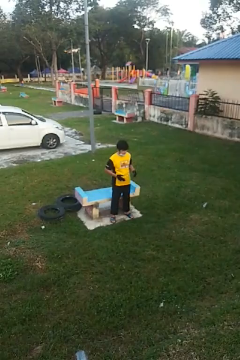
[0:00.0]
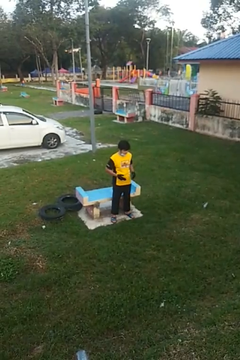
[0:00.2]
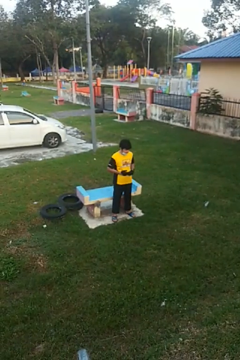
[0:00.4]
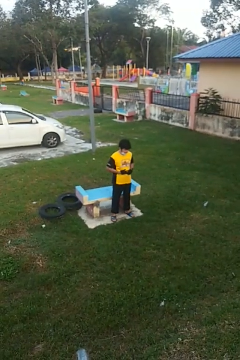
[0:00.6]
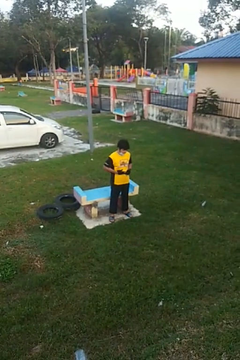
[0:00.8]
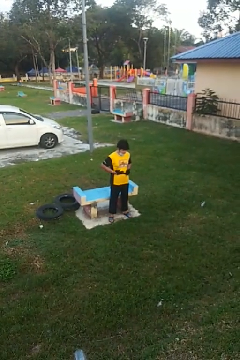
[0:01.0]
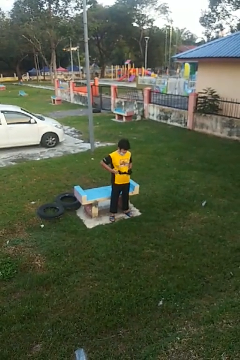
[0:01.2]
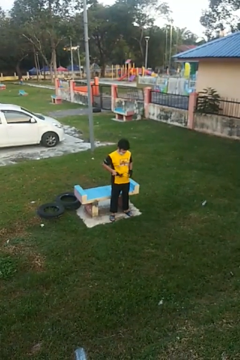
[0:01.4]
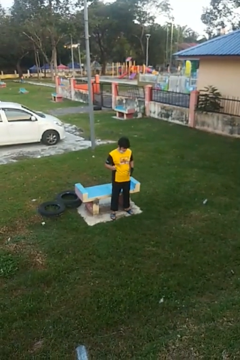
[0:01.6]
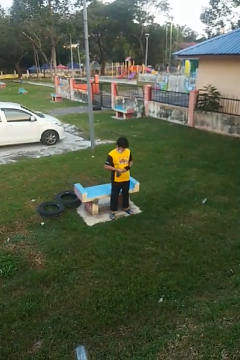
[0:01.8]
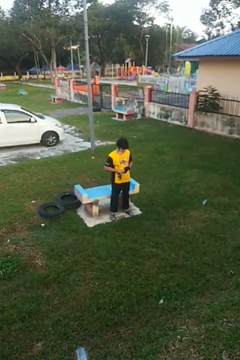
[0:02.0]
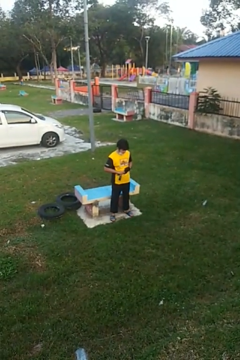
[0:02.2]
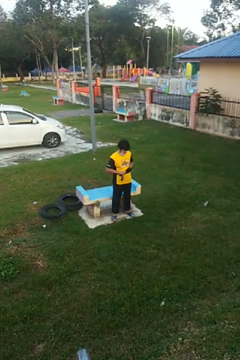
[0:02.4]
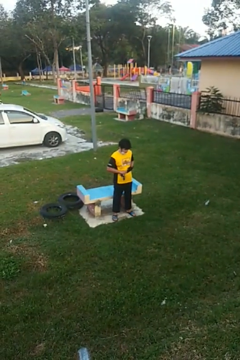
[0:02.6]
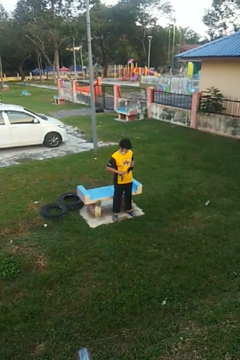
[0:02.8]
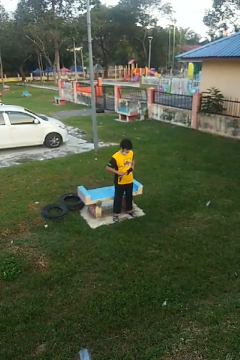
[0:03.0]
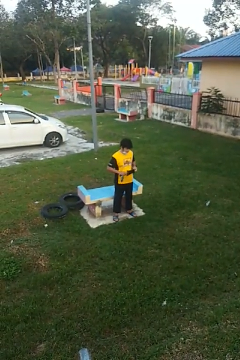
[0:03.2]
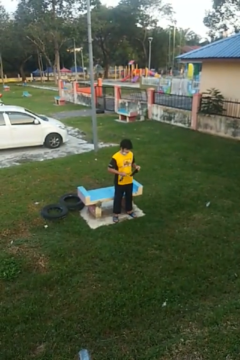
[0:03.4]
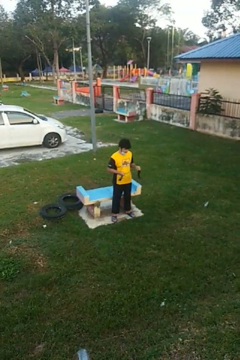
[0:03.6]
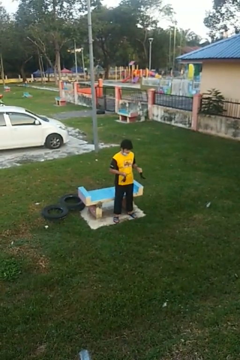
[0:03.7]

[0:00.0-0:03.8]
person takes off gloves

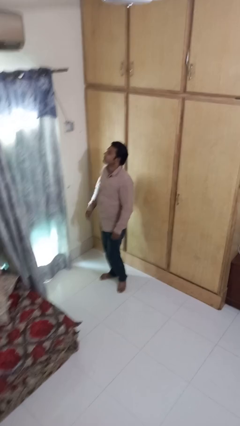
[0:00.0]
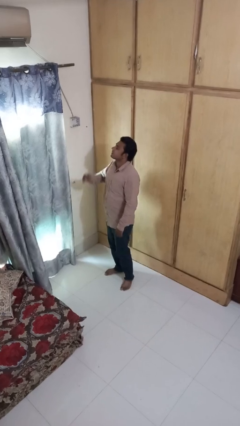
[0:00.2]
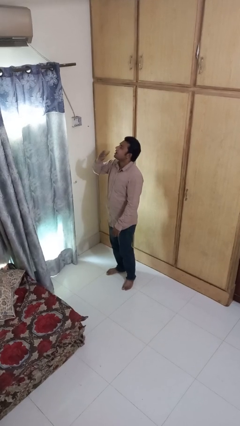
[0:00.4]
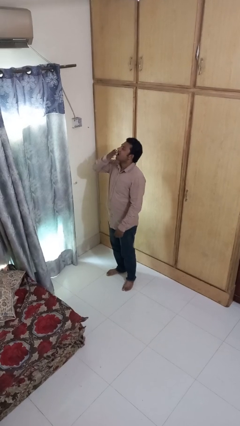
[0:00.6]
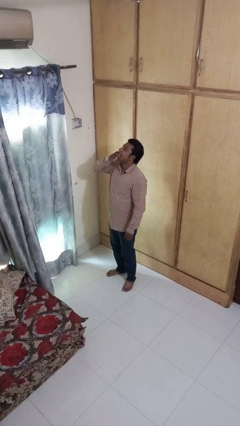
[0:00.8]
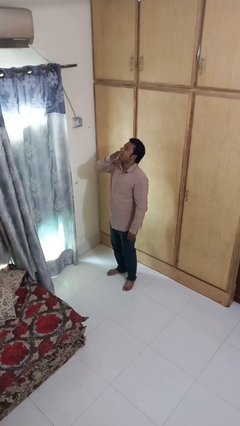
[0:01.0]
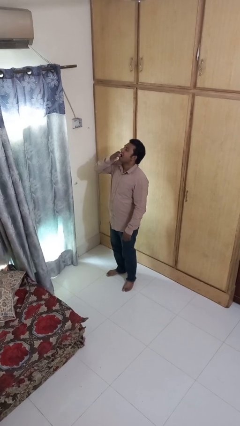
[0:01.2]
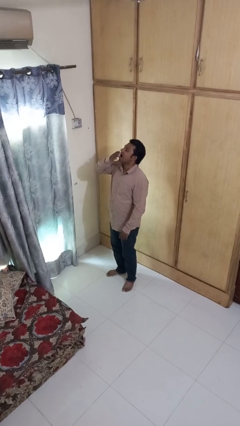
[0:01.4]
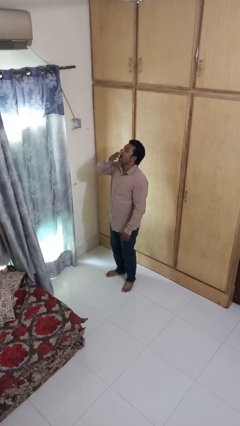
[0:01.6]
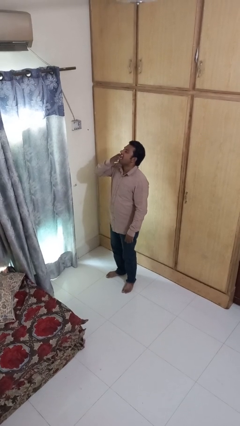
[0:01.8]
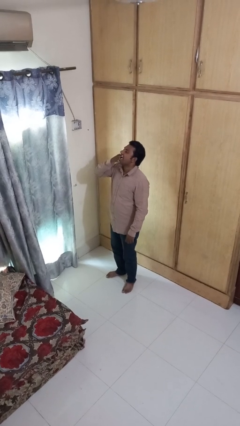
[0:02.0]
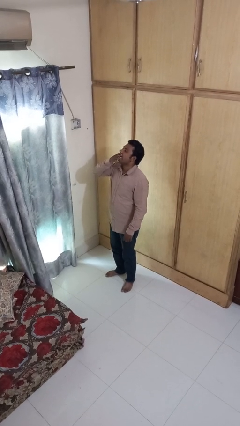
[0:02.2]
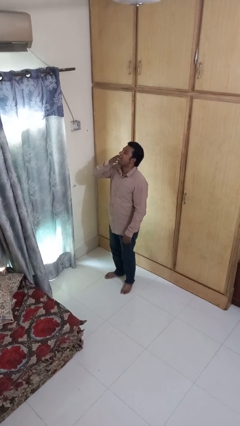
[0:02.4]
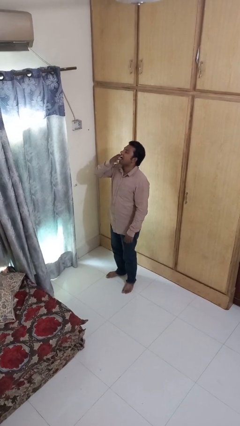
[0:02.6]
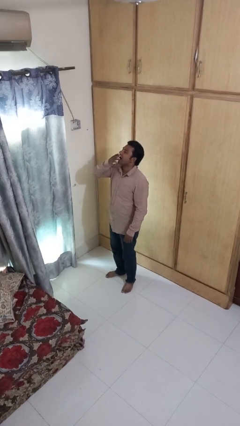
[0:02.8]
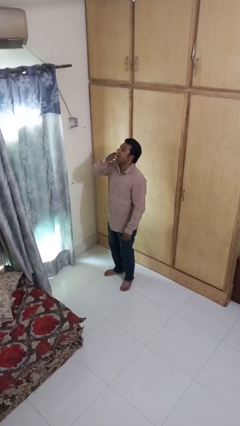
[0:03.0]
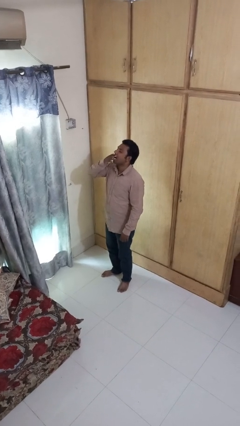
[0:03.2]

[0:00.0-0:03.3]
person yawns

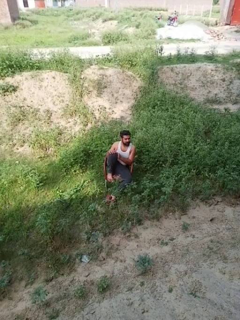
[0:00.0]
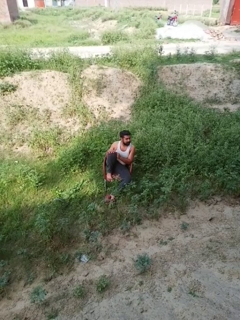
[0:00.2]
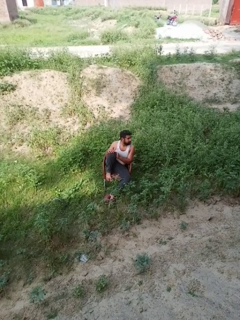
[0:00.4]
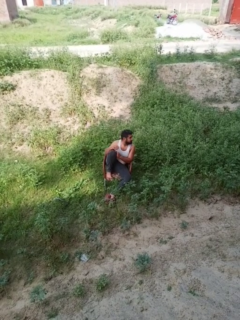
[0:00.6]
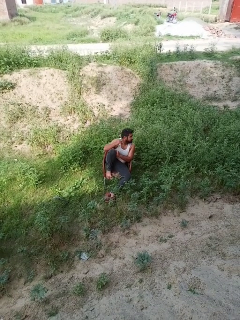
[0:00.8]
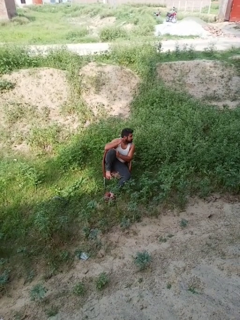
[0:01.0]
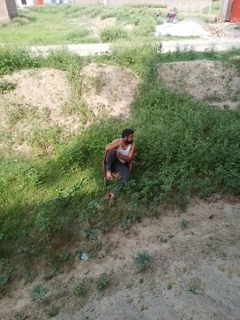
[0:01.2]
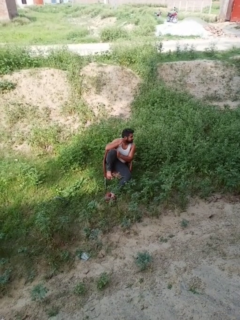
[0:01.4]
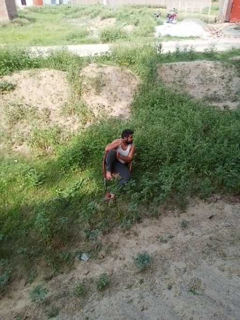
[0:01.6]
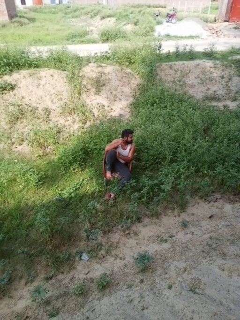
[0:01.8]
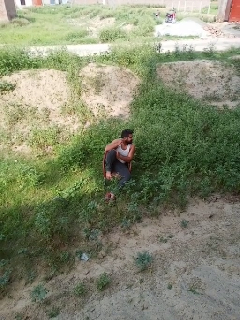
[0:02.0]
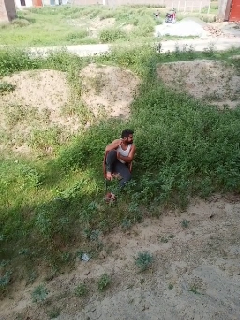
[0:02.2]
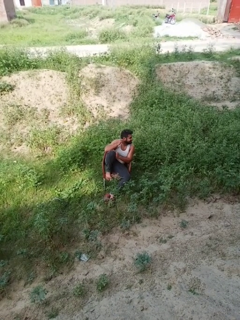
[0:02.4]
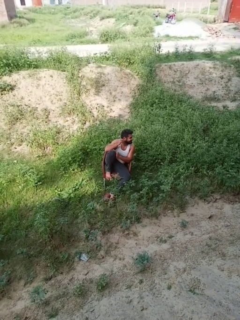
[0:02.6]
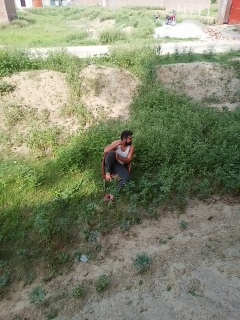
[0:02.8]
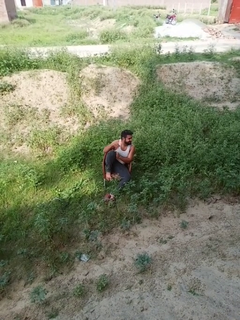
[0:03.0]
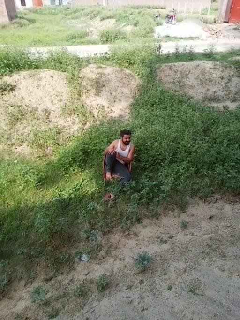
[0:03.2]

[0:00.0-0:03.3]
person touches earlobe

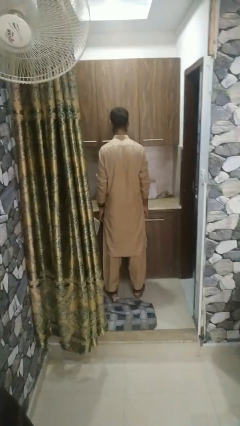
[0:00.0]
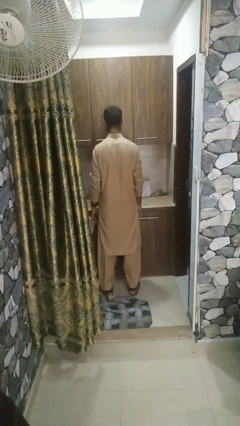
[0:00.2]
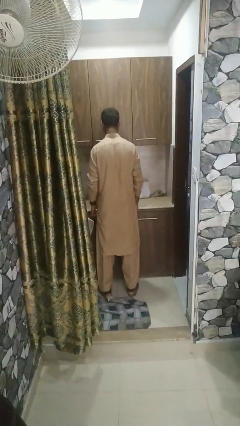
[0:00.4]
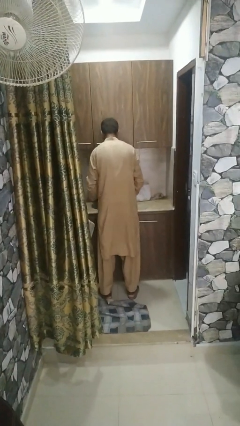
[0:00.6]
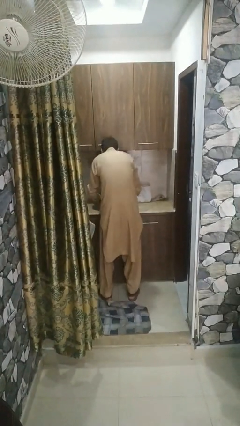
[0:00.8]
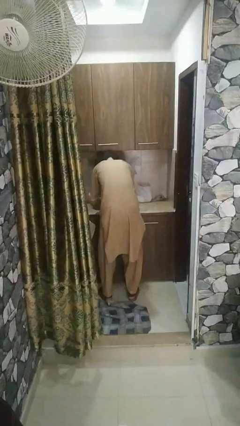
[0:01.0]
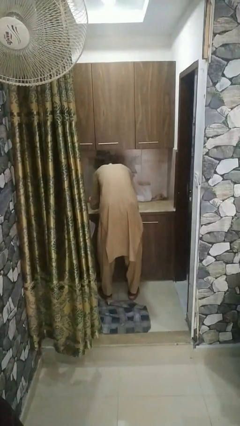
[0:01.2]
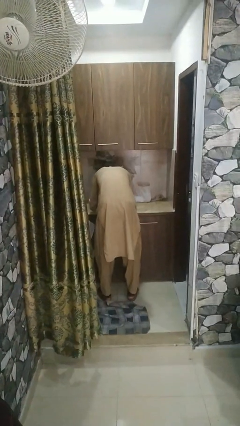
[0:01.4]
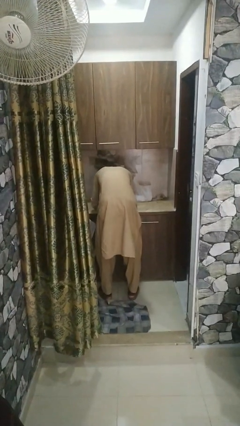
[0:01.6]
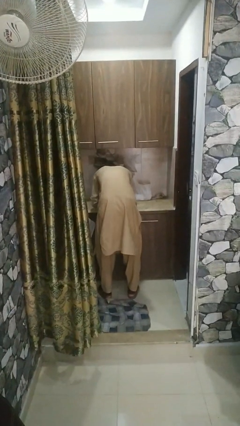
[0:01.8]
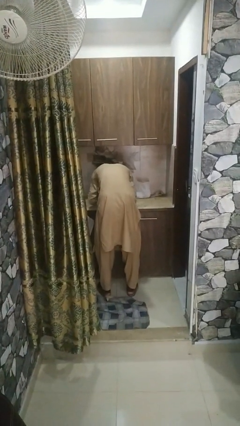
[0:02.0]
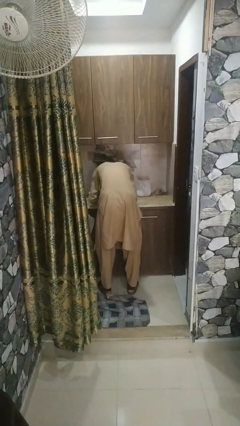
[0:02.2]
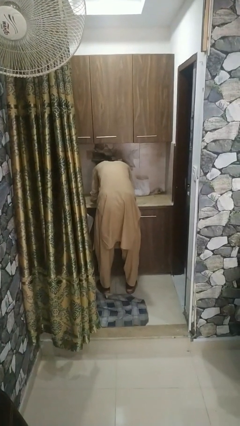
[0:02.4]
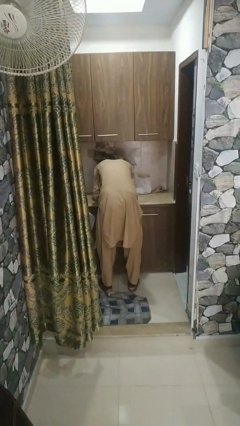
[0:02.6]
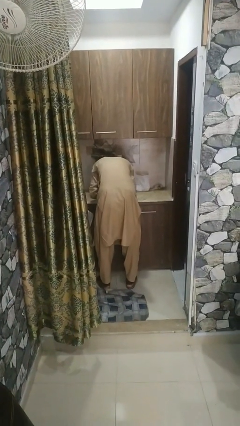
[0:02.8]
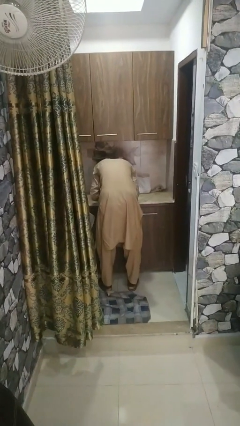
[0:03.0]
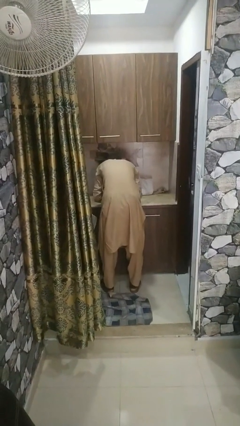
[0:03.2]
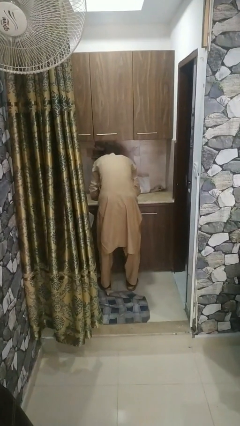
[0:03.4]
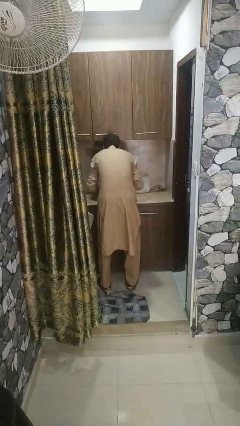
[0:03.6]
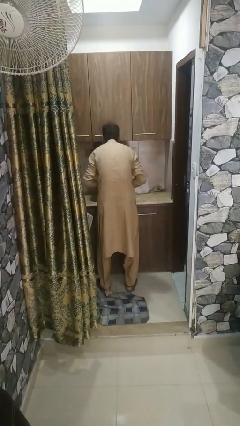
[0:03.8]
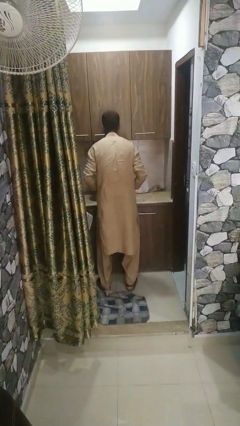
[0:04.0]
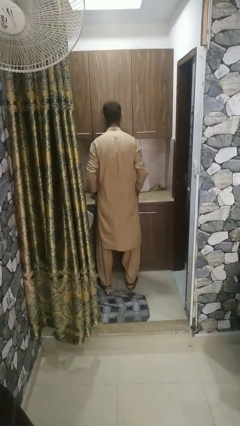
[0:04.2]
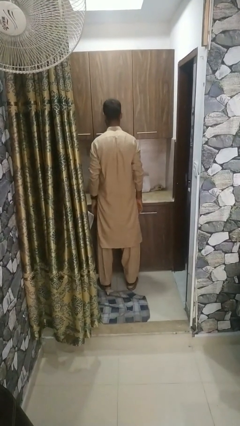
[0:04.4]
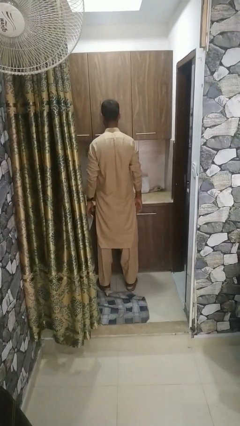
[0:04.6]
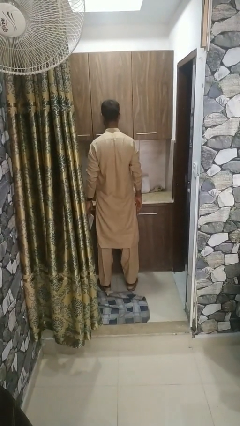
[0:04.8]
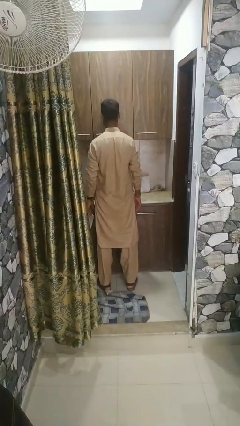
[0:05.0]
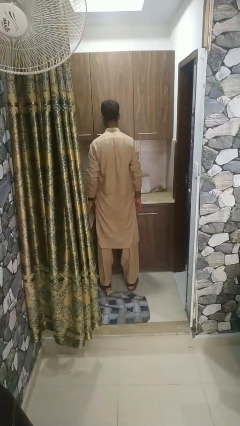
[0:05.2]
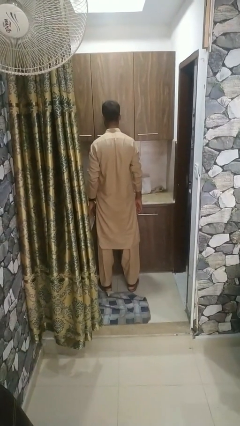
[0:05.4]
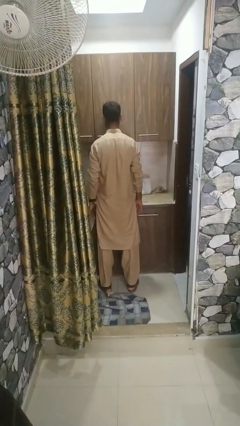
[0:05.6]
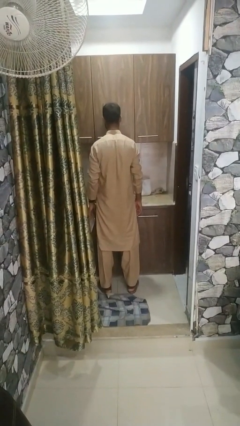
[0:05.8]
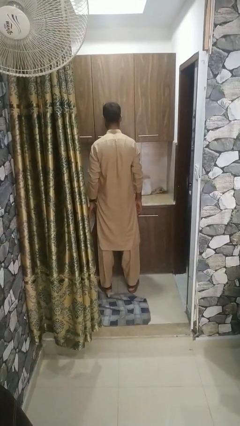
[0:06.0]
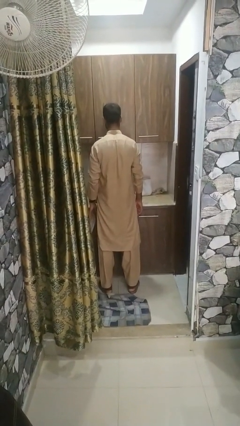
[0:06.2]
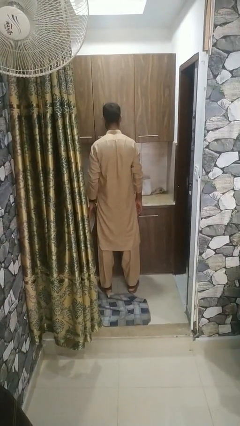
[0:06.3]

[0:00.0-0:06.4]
person washes face

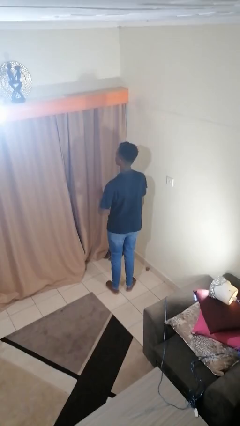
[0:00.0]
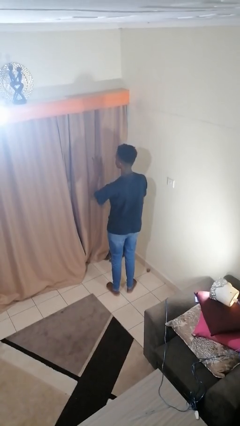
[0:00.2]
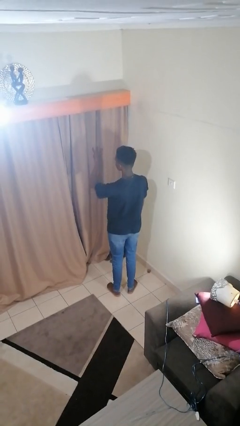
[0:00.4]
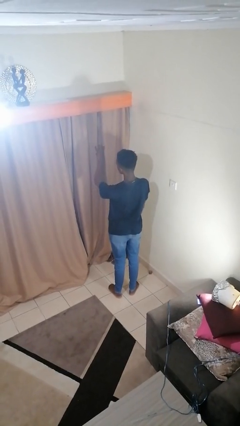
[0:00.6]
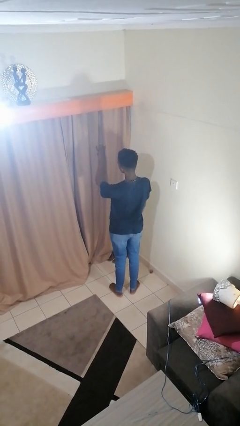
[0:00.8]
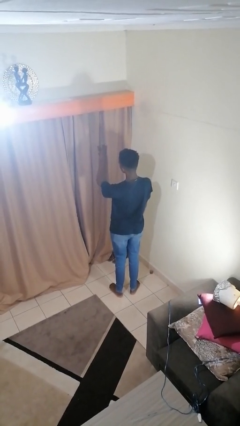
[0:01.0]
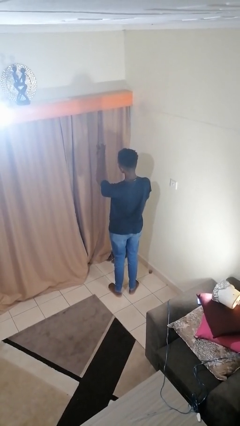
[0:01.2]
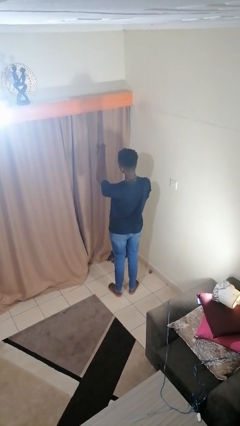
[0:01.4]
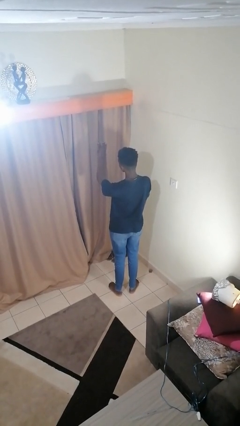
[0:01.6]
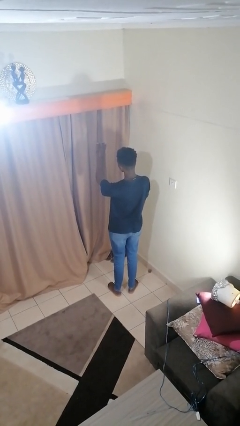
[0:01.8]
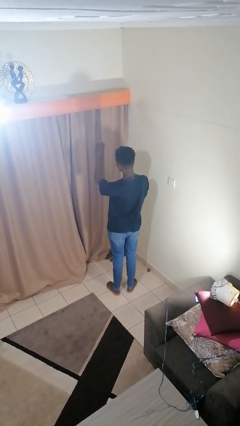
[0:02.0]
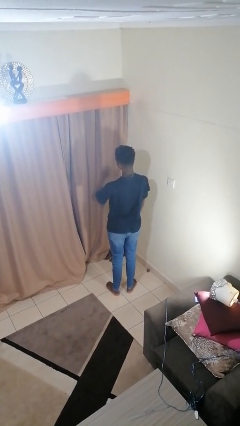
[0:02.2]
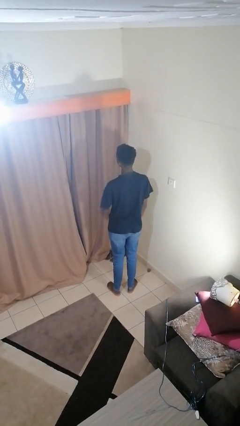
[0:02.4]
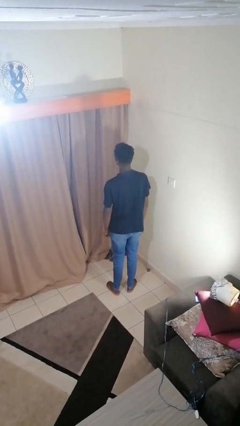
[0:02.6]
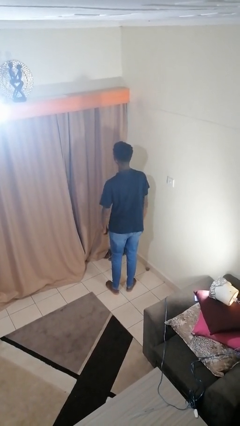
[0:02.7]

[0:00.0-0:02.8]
person gestures number three
